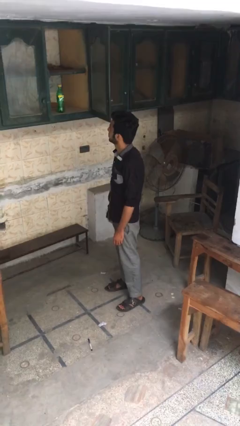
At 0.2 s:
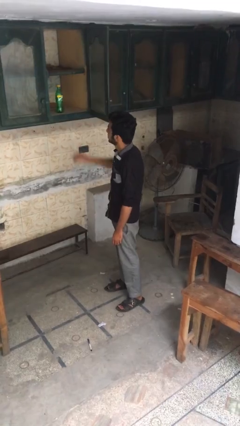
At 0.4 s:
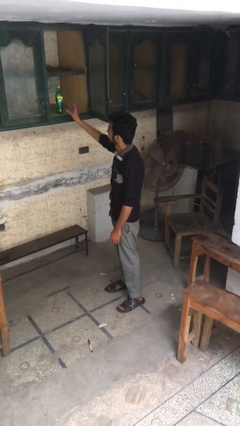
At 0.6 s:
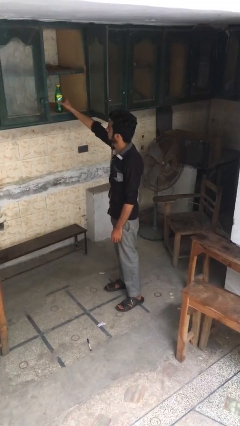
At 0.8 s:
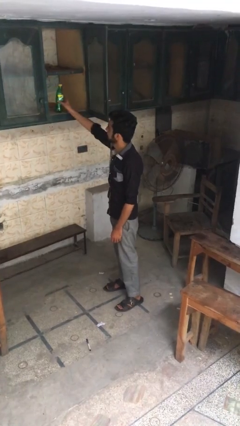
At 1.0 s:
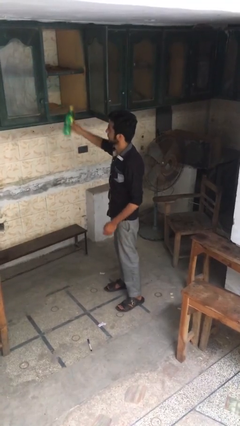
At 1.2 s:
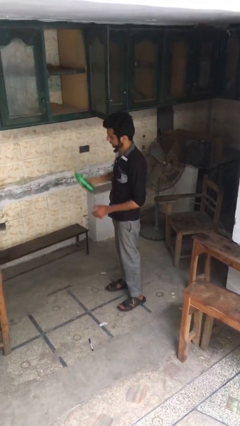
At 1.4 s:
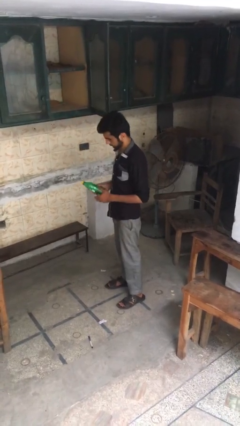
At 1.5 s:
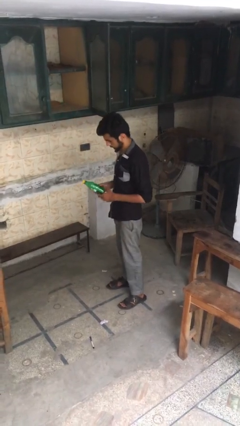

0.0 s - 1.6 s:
person takes object from cabinet

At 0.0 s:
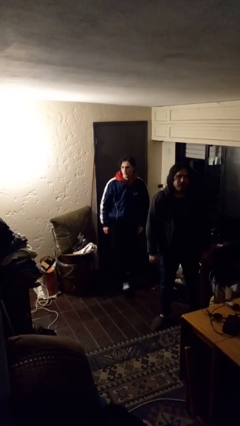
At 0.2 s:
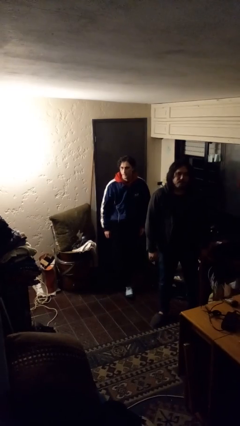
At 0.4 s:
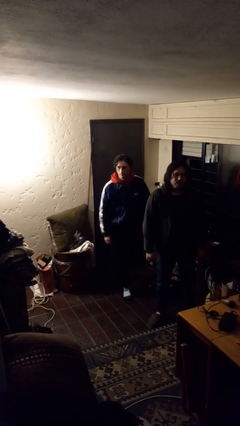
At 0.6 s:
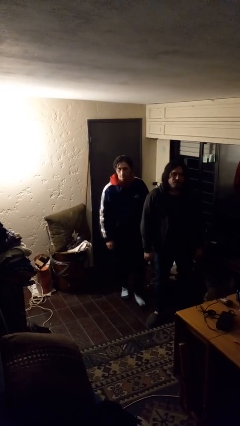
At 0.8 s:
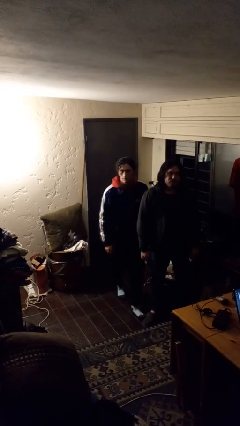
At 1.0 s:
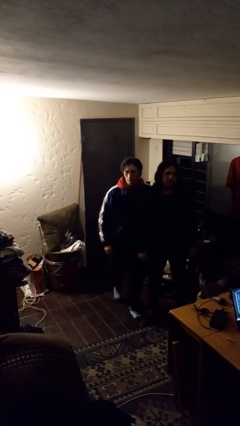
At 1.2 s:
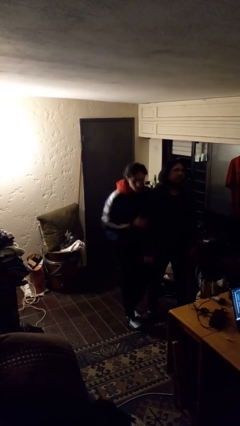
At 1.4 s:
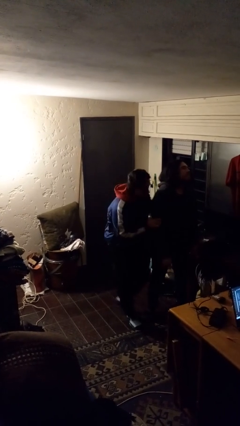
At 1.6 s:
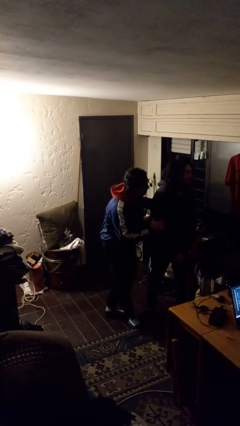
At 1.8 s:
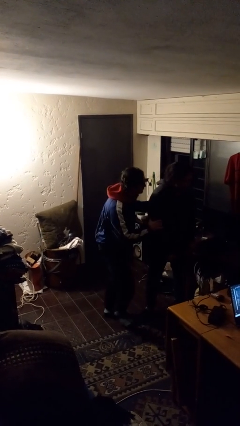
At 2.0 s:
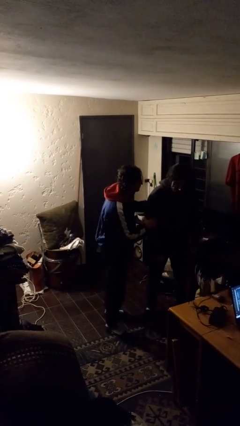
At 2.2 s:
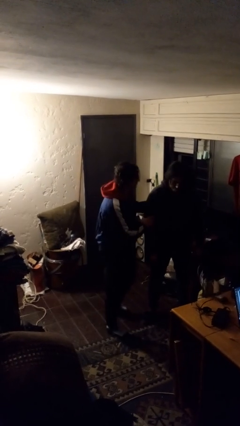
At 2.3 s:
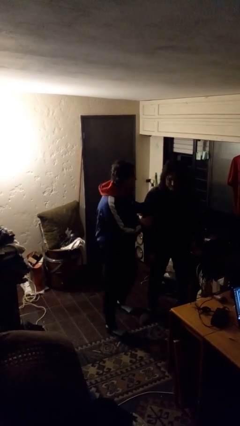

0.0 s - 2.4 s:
person bumps into person

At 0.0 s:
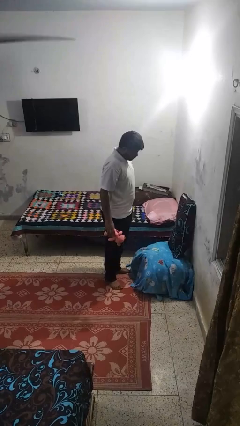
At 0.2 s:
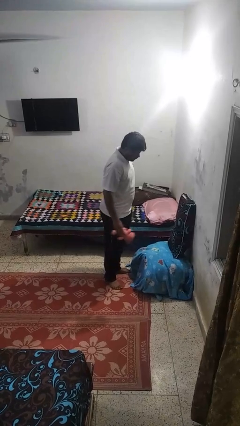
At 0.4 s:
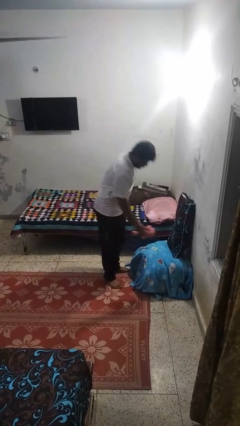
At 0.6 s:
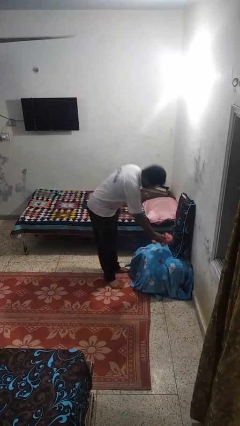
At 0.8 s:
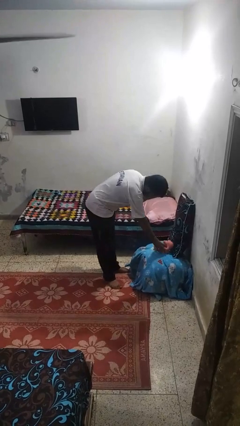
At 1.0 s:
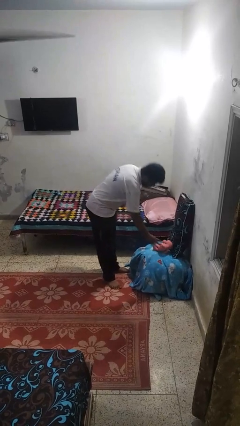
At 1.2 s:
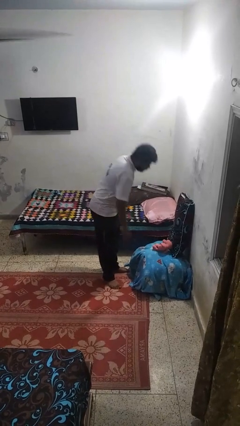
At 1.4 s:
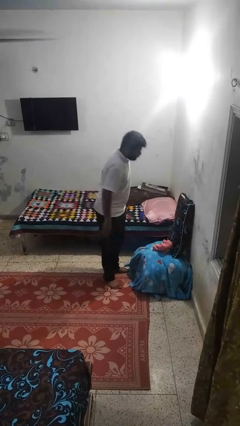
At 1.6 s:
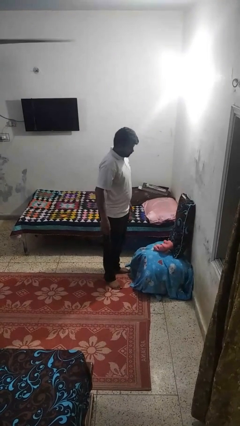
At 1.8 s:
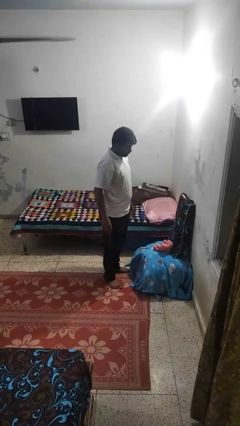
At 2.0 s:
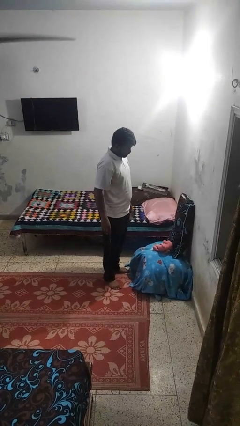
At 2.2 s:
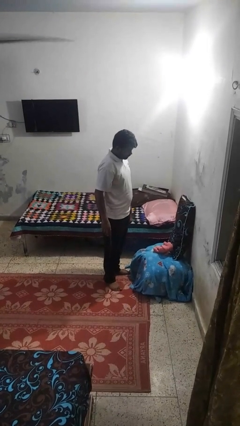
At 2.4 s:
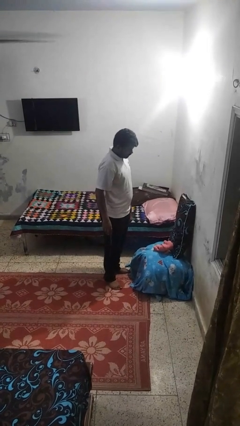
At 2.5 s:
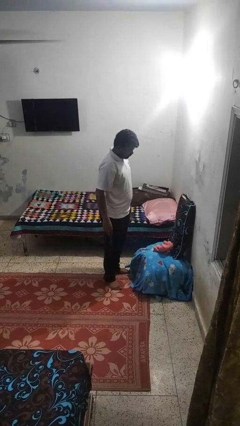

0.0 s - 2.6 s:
person puts down object on couch

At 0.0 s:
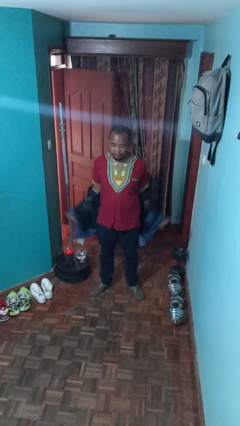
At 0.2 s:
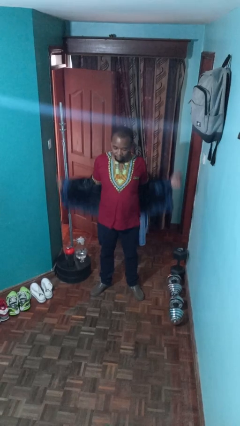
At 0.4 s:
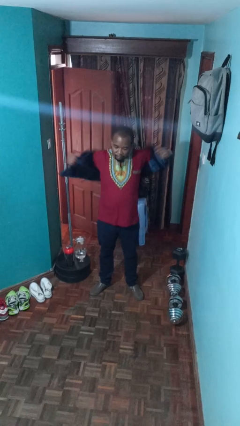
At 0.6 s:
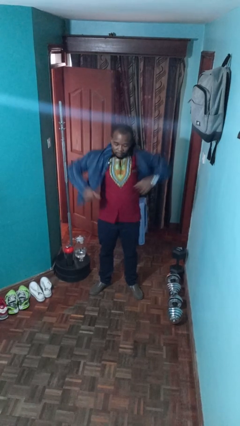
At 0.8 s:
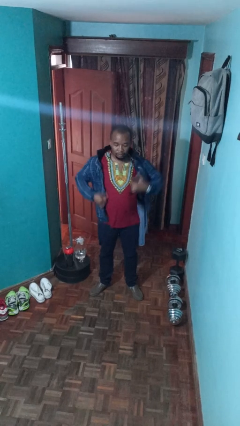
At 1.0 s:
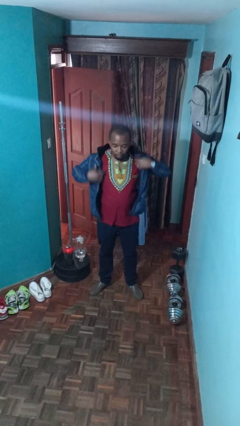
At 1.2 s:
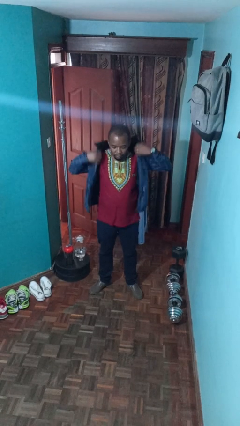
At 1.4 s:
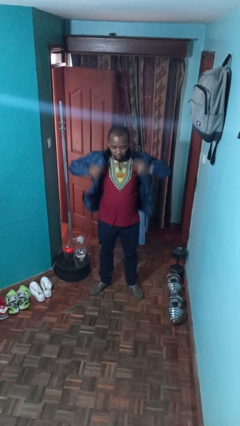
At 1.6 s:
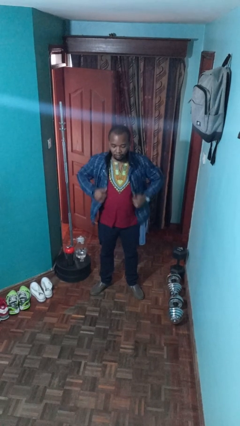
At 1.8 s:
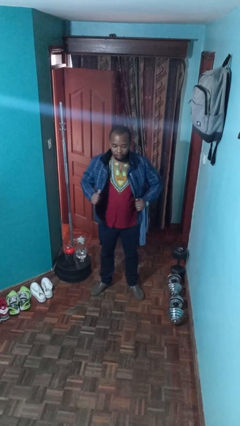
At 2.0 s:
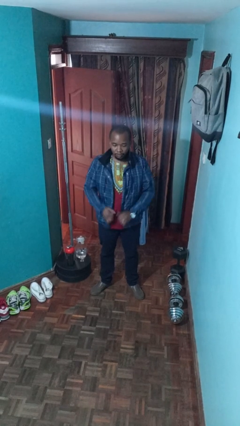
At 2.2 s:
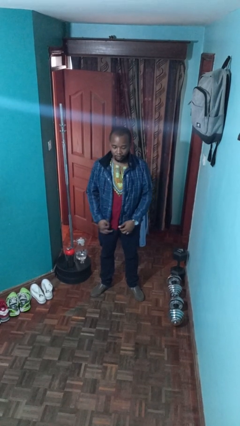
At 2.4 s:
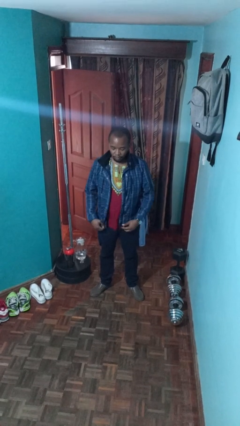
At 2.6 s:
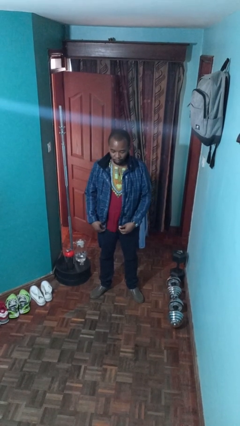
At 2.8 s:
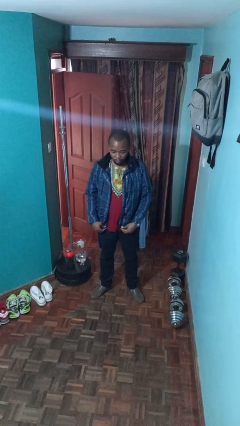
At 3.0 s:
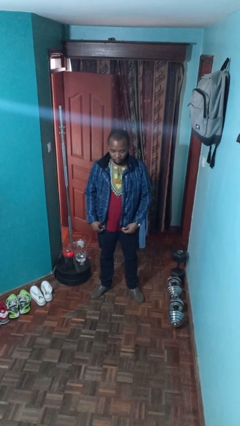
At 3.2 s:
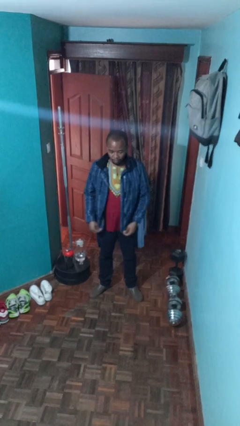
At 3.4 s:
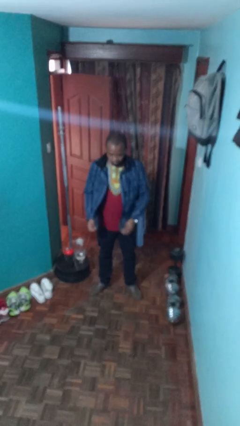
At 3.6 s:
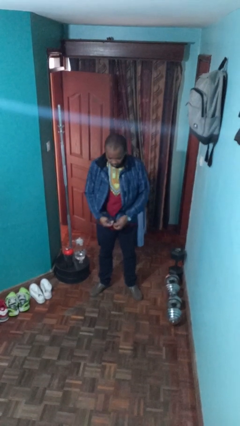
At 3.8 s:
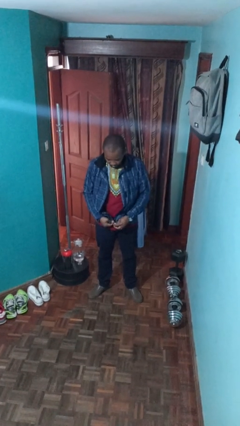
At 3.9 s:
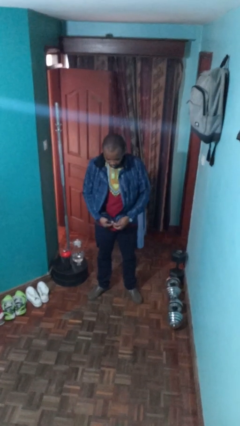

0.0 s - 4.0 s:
person puts on jacket

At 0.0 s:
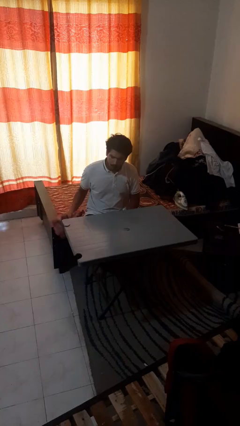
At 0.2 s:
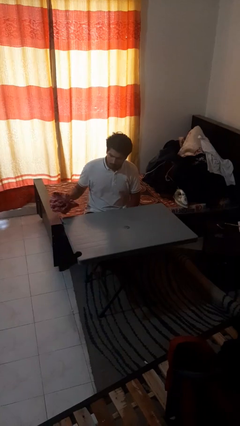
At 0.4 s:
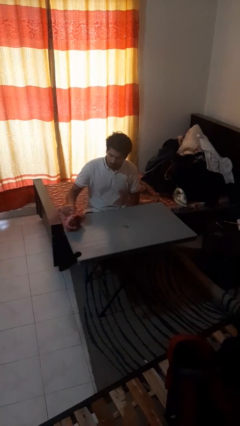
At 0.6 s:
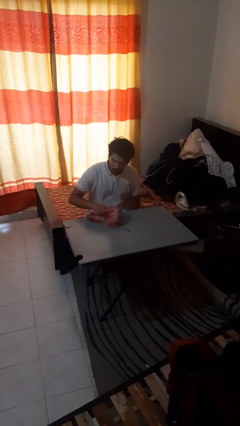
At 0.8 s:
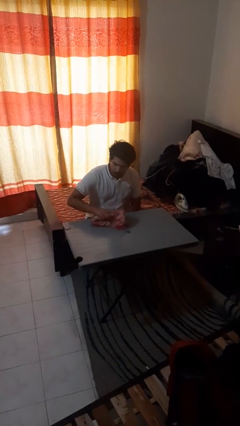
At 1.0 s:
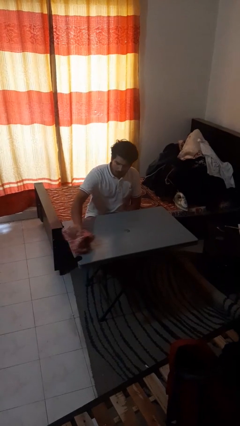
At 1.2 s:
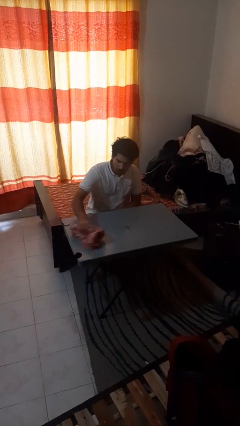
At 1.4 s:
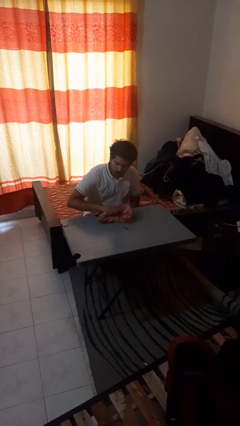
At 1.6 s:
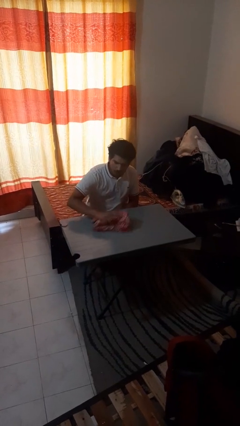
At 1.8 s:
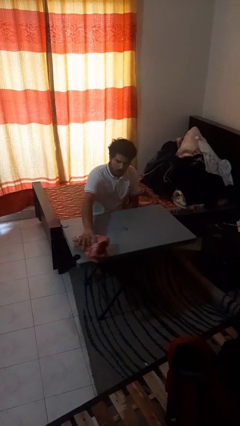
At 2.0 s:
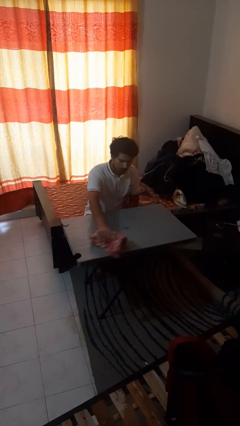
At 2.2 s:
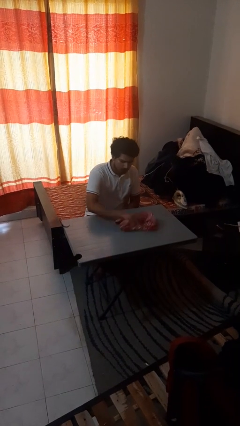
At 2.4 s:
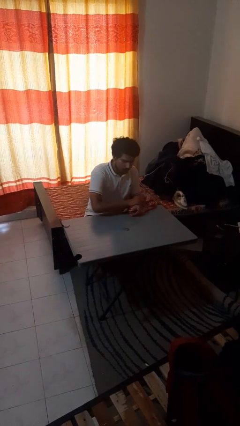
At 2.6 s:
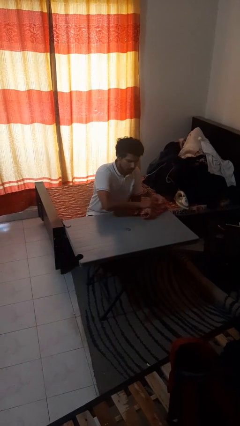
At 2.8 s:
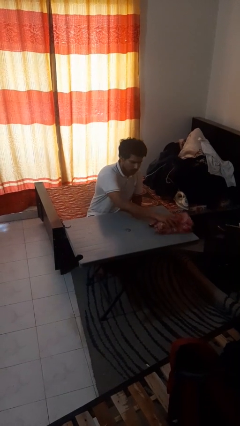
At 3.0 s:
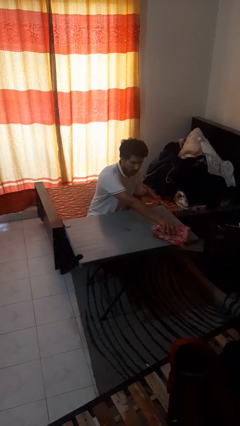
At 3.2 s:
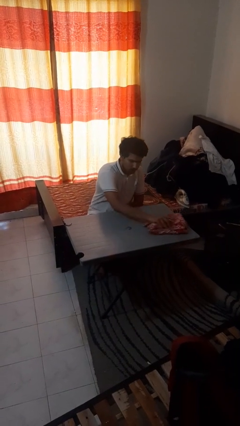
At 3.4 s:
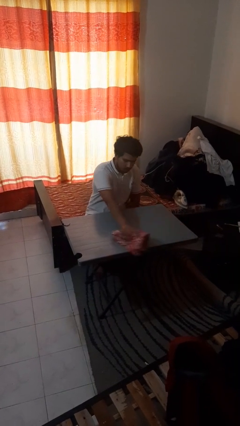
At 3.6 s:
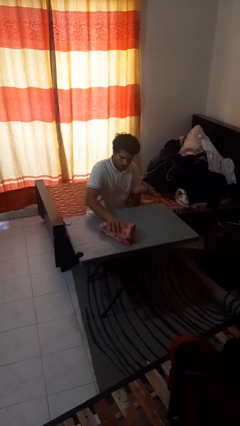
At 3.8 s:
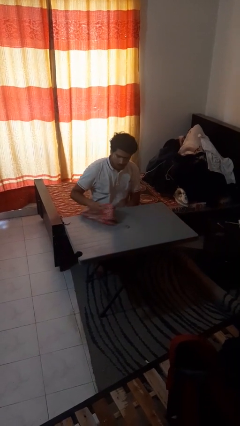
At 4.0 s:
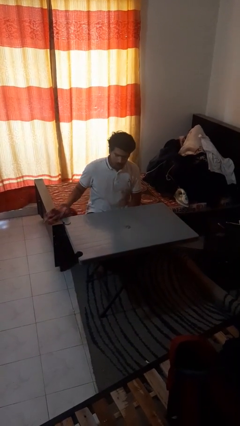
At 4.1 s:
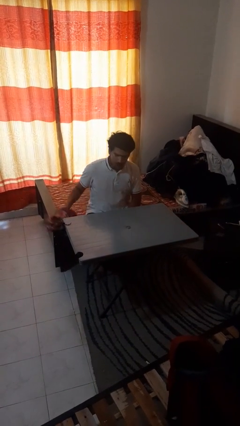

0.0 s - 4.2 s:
person cleans table with rag

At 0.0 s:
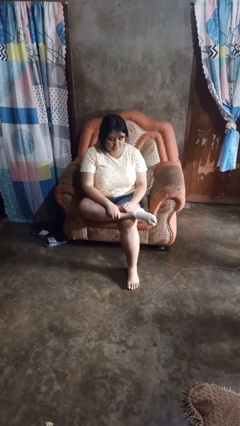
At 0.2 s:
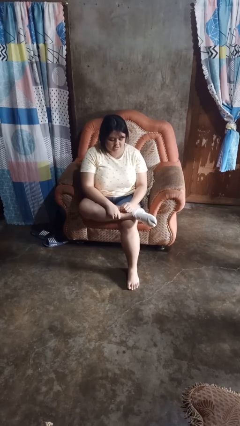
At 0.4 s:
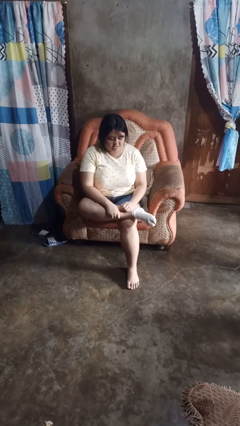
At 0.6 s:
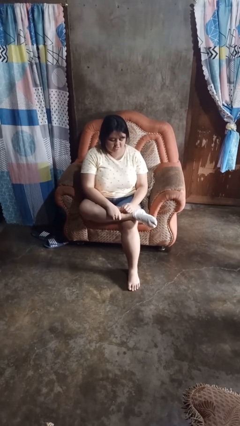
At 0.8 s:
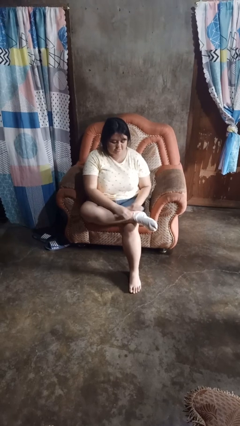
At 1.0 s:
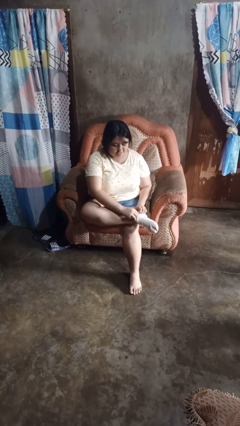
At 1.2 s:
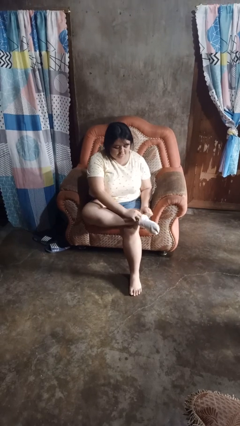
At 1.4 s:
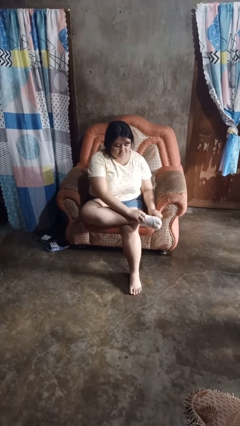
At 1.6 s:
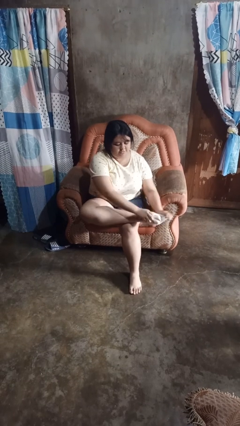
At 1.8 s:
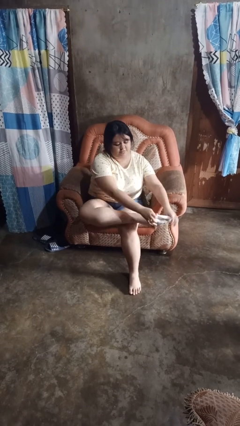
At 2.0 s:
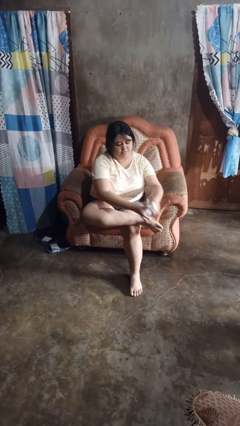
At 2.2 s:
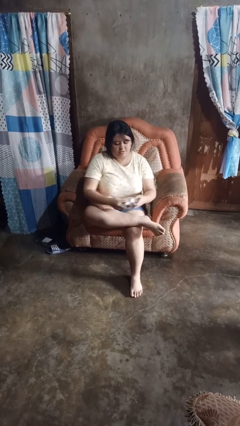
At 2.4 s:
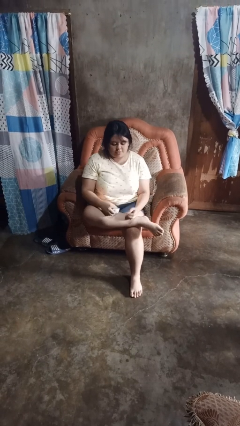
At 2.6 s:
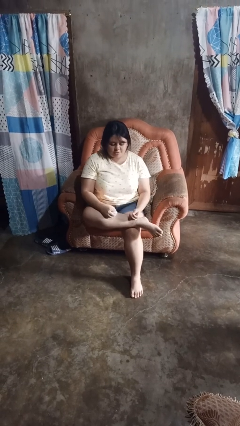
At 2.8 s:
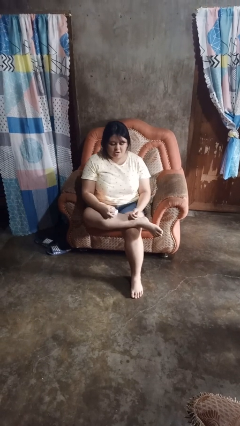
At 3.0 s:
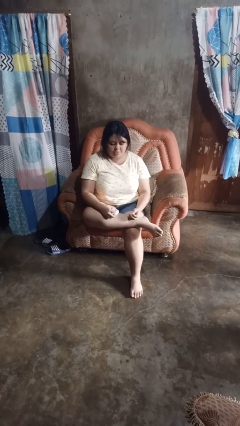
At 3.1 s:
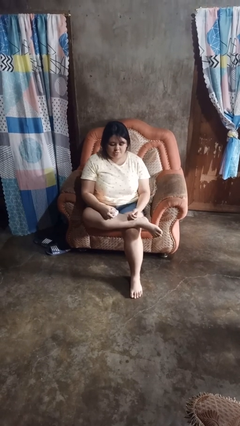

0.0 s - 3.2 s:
person takes off socks
